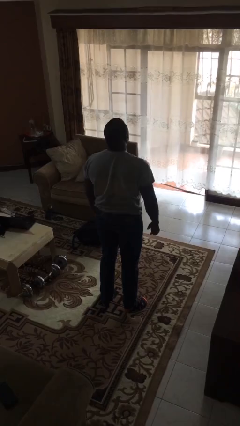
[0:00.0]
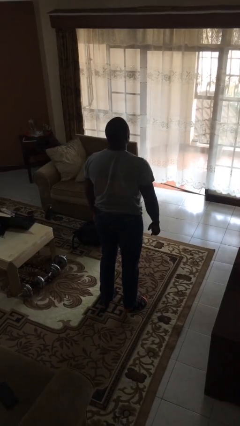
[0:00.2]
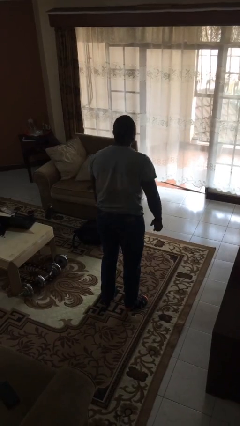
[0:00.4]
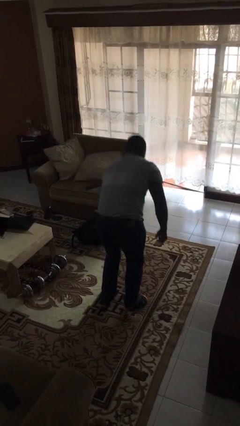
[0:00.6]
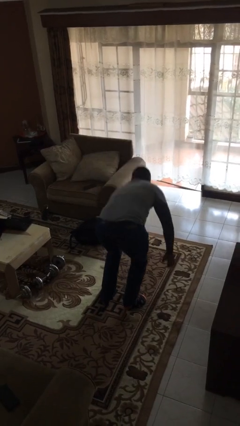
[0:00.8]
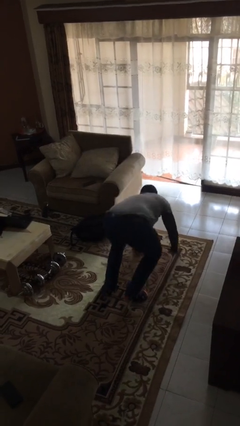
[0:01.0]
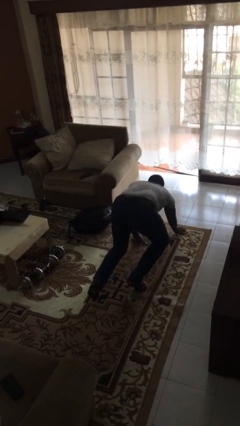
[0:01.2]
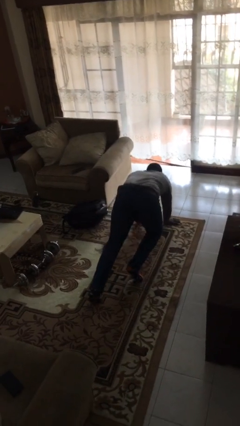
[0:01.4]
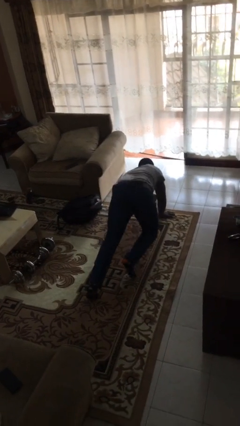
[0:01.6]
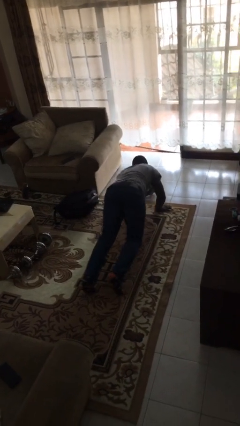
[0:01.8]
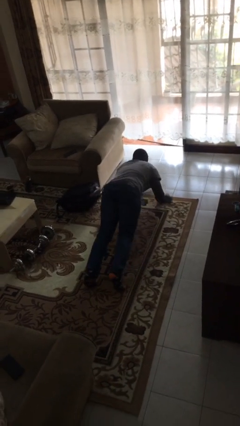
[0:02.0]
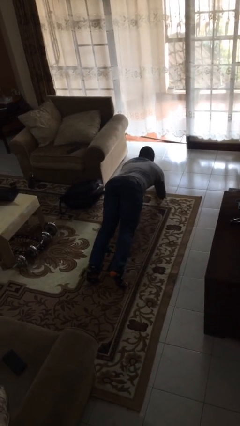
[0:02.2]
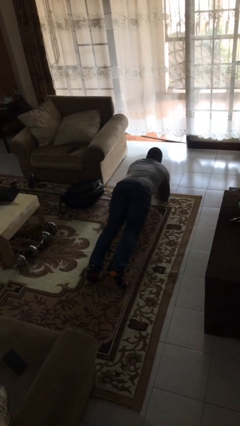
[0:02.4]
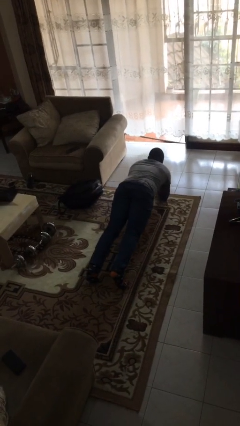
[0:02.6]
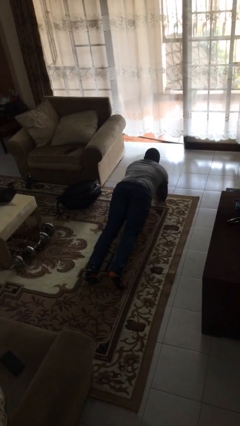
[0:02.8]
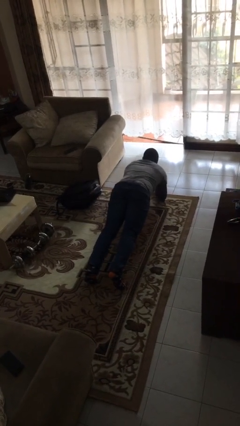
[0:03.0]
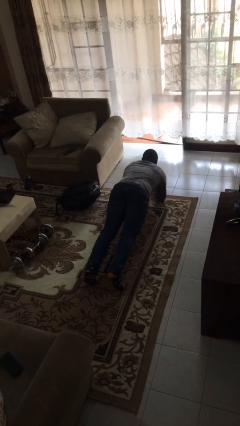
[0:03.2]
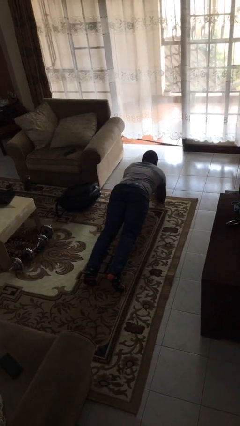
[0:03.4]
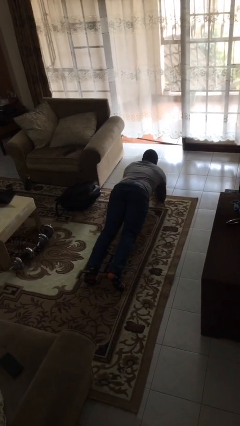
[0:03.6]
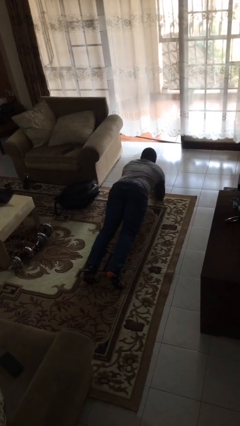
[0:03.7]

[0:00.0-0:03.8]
person exercises with plank

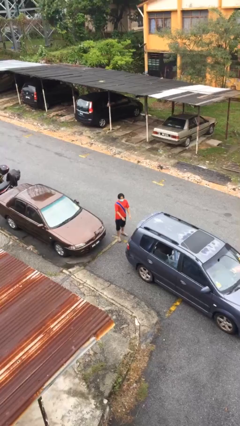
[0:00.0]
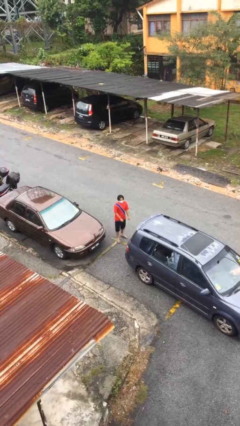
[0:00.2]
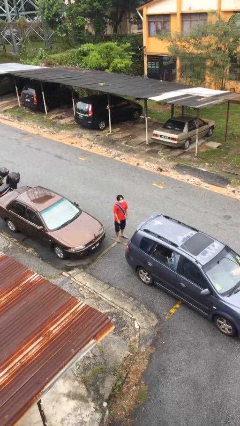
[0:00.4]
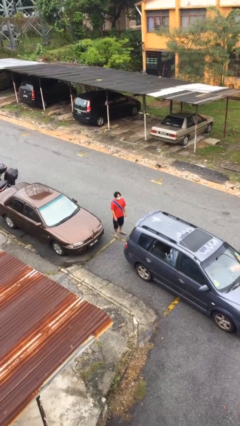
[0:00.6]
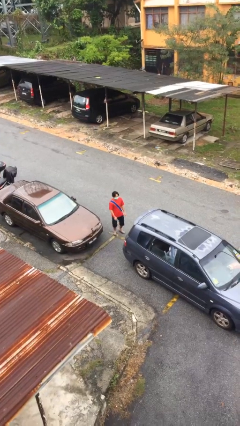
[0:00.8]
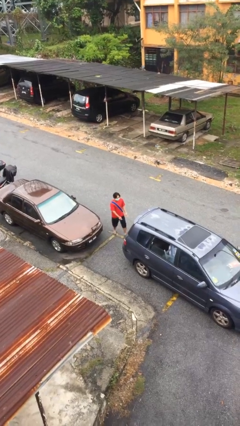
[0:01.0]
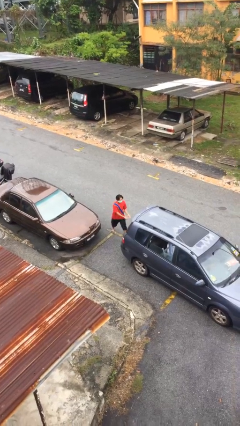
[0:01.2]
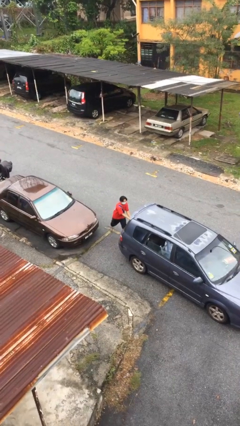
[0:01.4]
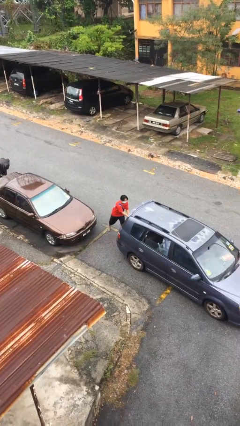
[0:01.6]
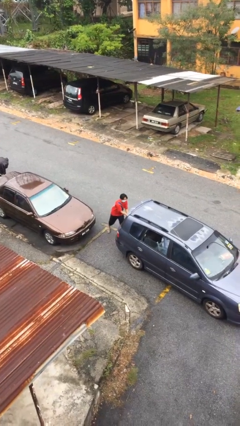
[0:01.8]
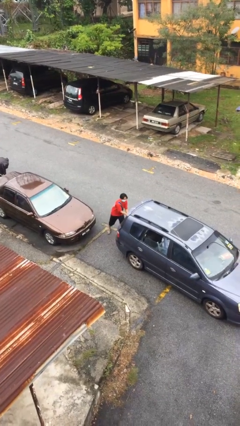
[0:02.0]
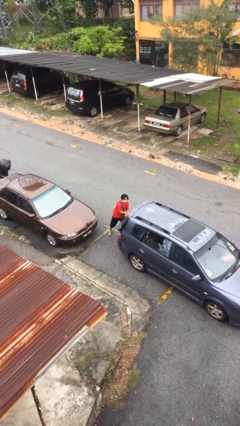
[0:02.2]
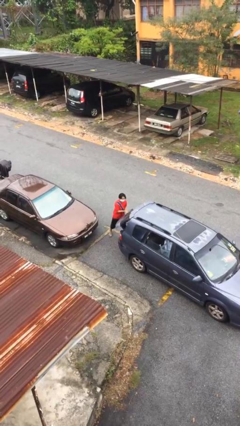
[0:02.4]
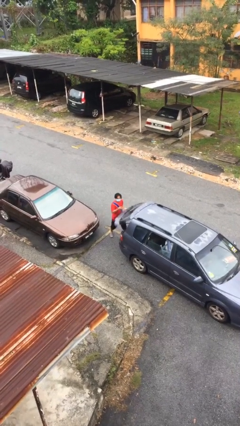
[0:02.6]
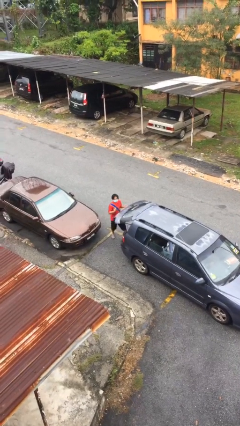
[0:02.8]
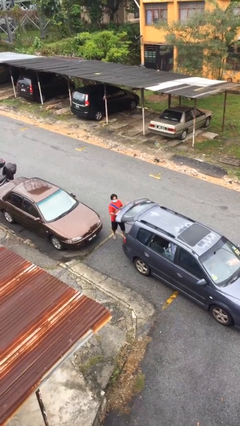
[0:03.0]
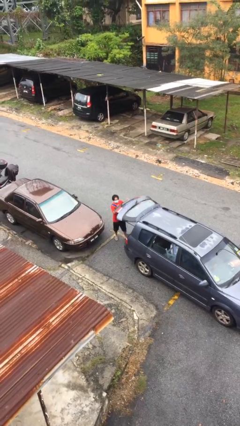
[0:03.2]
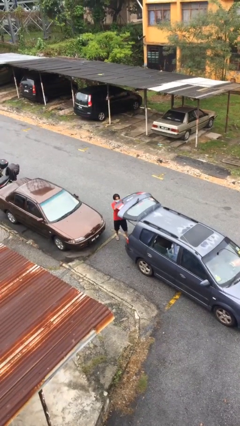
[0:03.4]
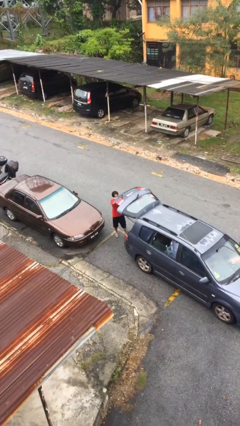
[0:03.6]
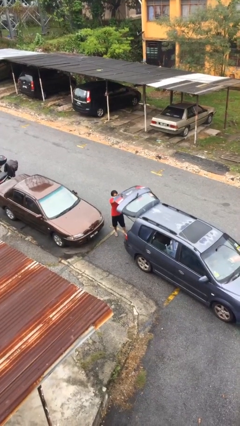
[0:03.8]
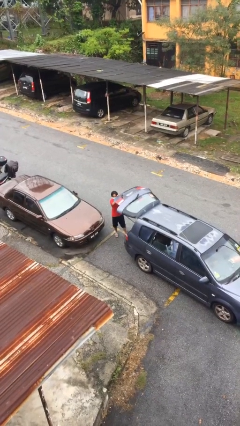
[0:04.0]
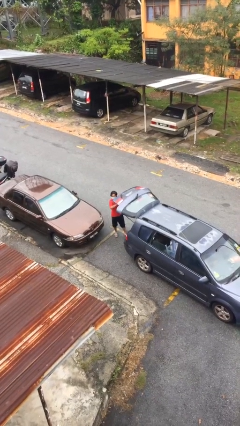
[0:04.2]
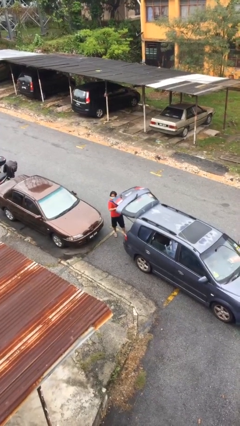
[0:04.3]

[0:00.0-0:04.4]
person opens car trunk

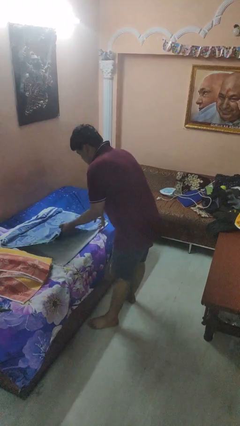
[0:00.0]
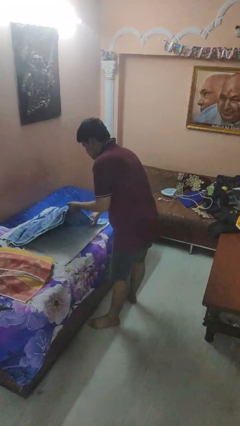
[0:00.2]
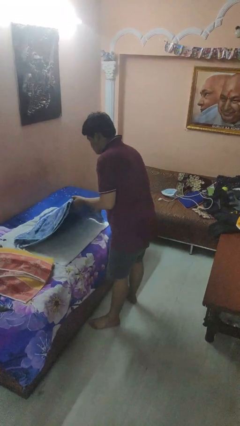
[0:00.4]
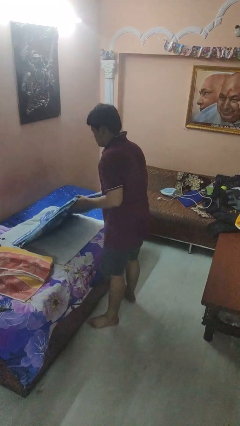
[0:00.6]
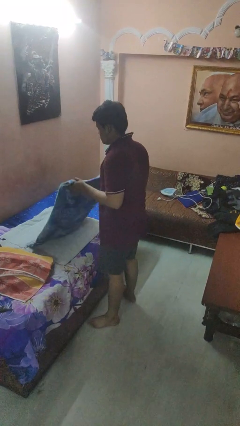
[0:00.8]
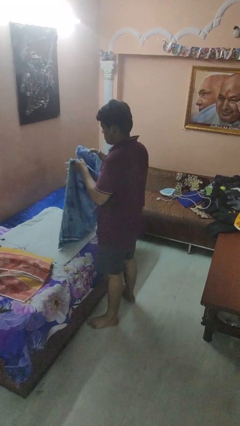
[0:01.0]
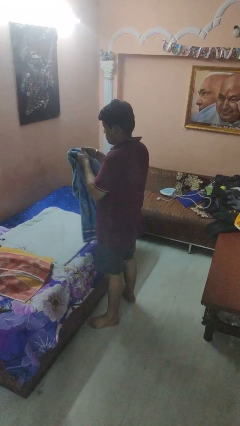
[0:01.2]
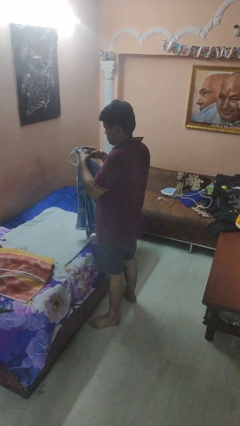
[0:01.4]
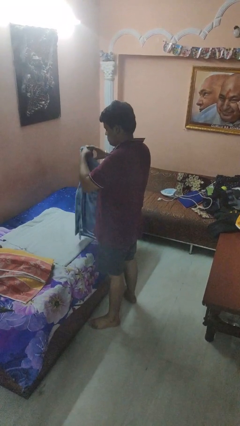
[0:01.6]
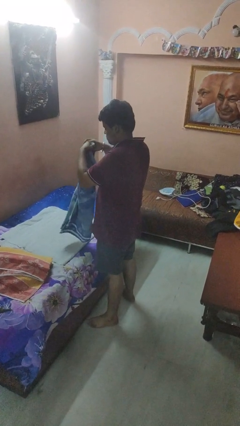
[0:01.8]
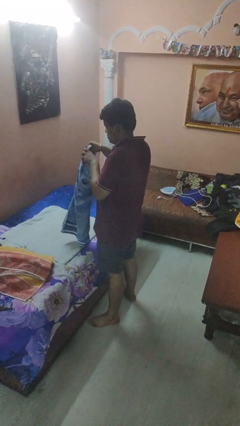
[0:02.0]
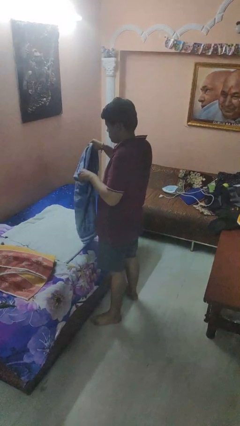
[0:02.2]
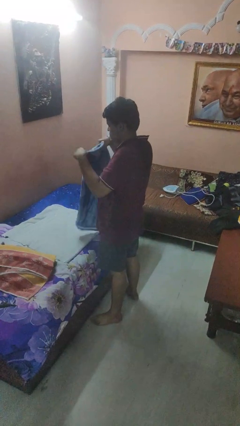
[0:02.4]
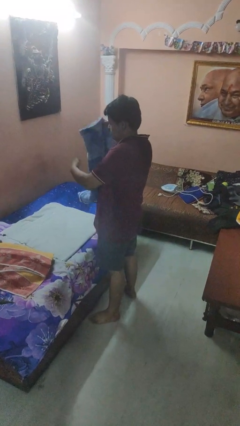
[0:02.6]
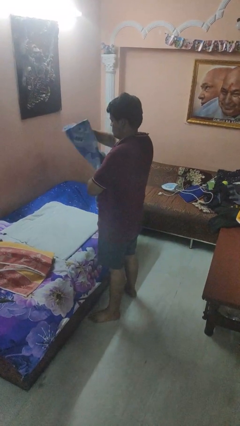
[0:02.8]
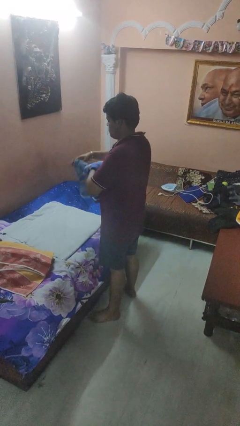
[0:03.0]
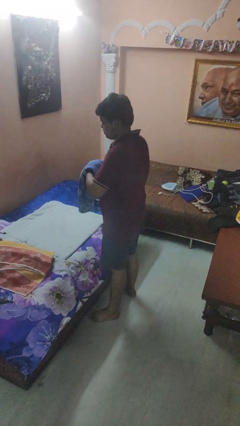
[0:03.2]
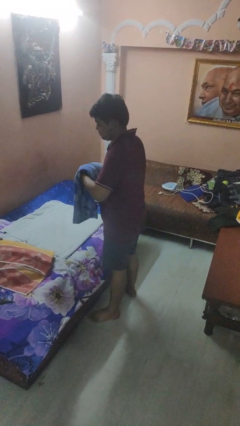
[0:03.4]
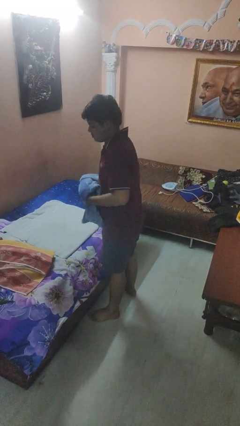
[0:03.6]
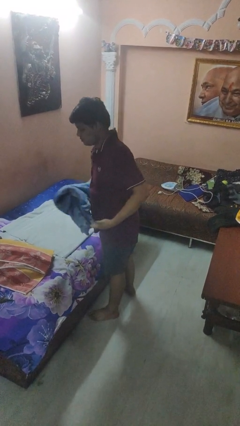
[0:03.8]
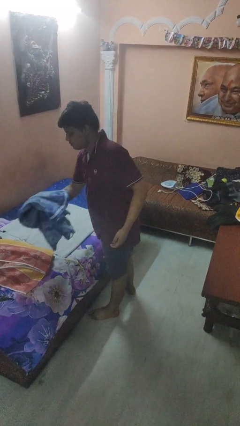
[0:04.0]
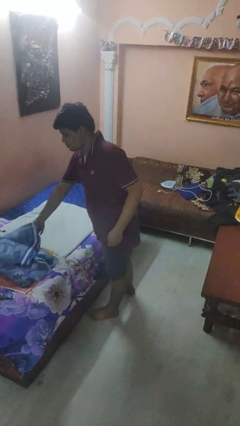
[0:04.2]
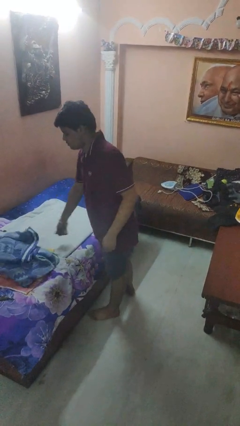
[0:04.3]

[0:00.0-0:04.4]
person folds towel

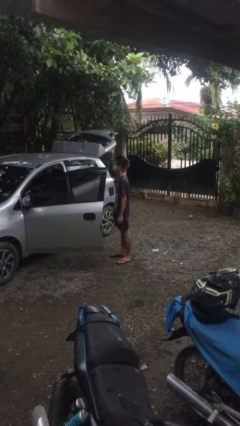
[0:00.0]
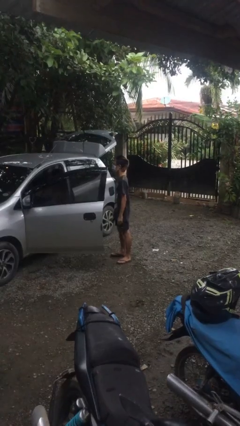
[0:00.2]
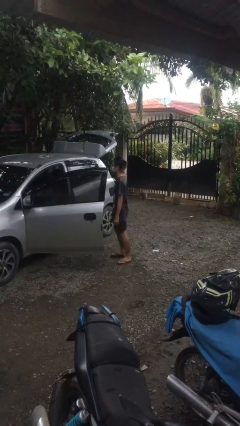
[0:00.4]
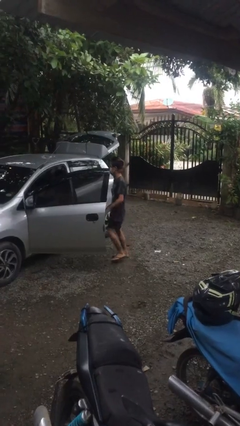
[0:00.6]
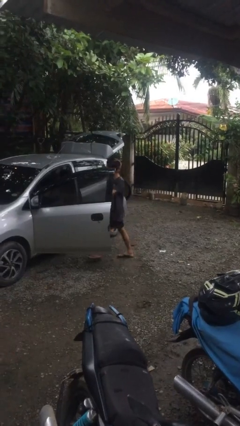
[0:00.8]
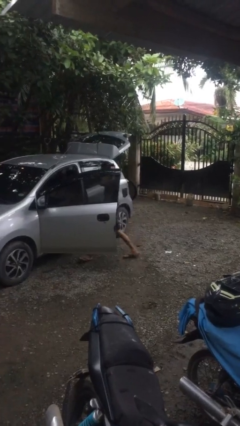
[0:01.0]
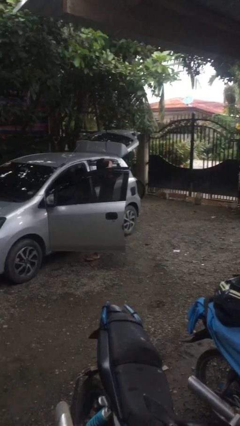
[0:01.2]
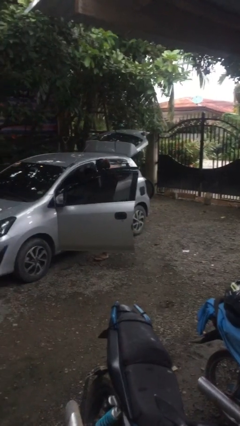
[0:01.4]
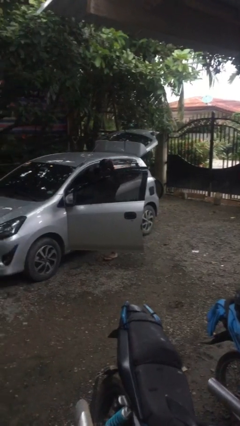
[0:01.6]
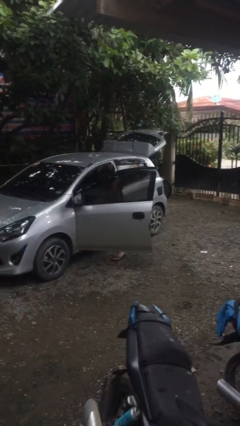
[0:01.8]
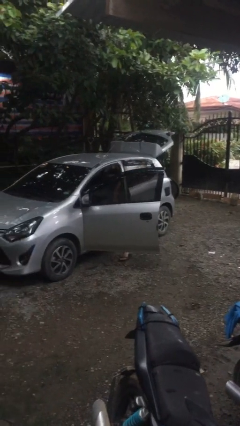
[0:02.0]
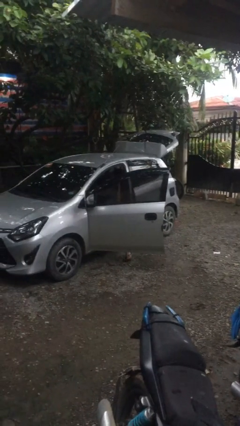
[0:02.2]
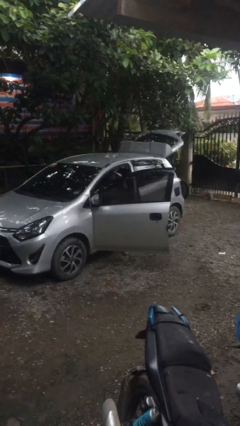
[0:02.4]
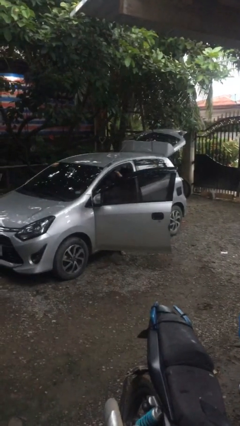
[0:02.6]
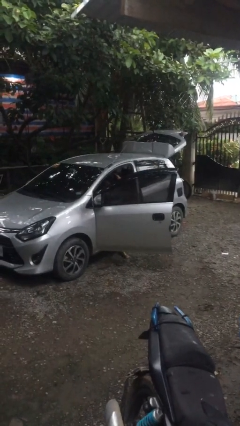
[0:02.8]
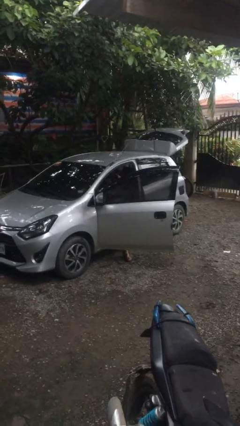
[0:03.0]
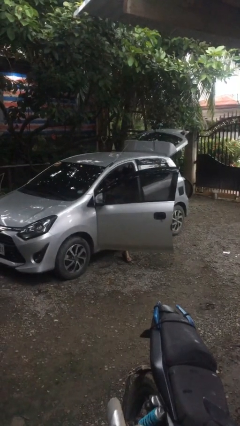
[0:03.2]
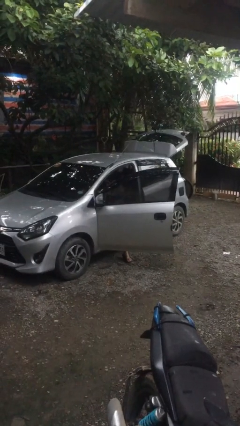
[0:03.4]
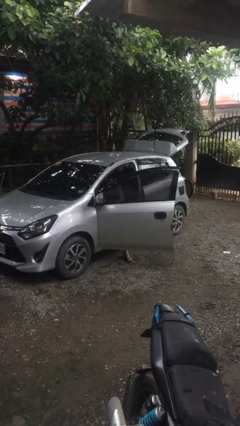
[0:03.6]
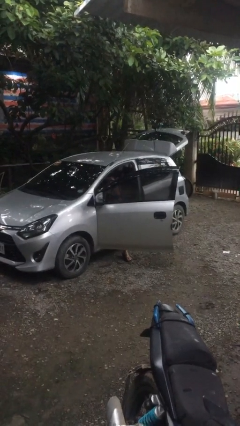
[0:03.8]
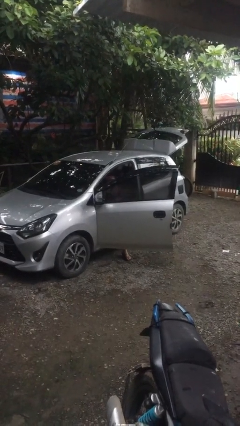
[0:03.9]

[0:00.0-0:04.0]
person enters car

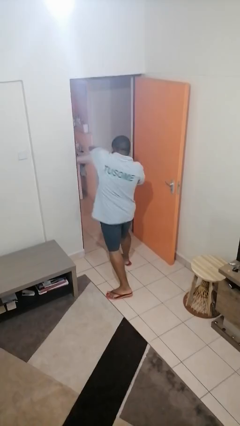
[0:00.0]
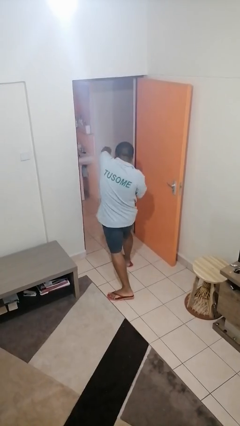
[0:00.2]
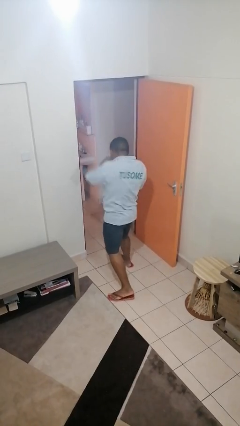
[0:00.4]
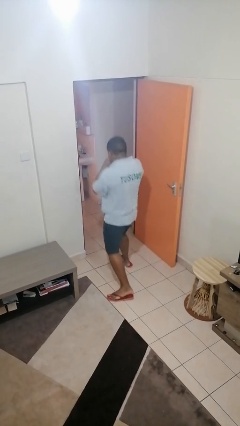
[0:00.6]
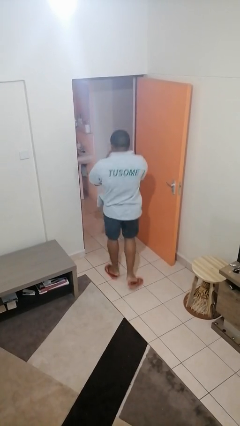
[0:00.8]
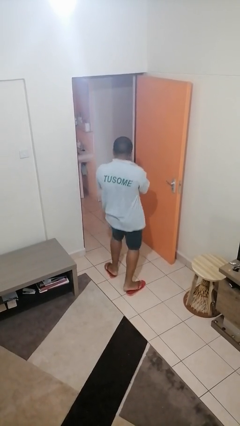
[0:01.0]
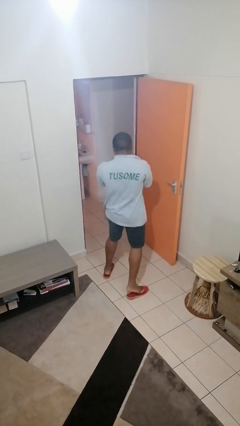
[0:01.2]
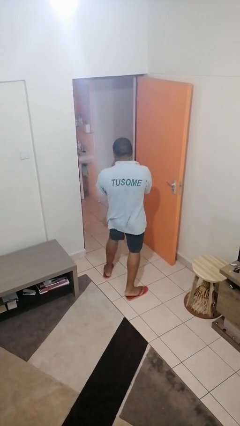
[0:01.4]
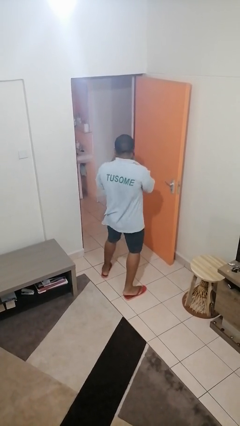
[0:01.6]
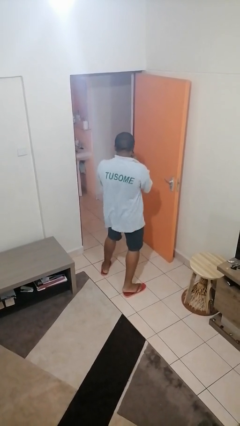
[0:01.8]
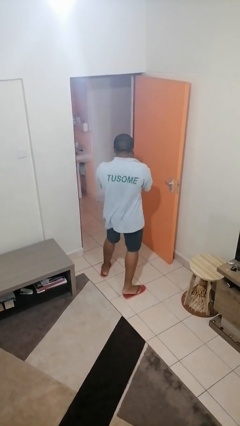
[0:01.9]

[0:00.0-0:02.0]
person punches
